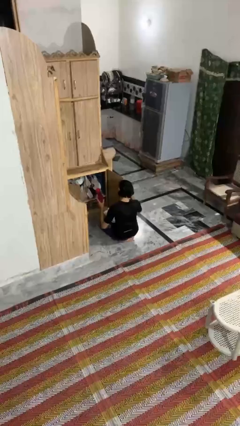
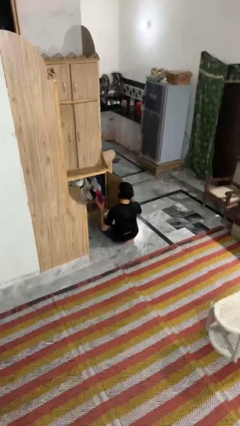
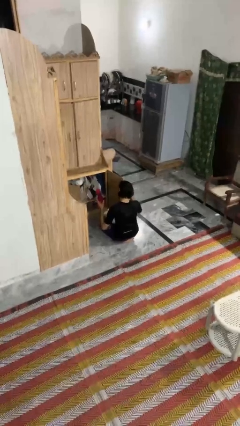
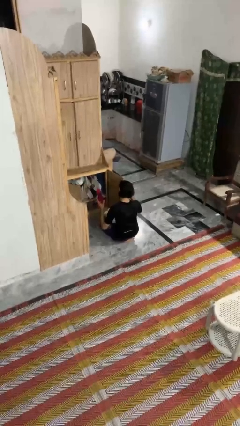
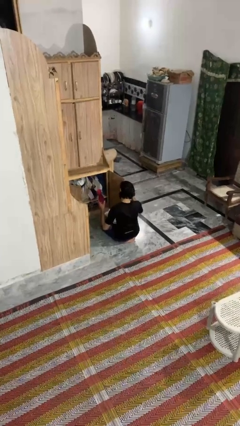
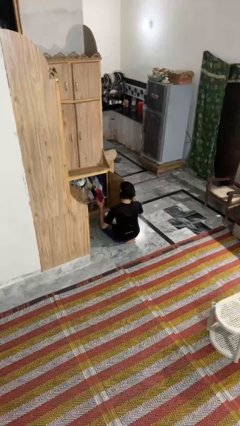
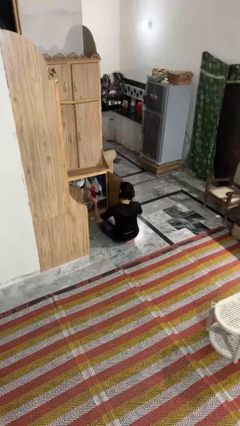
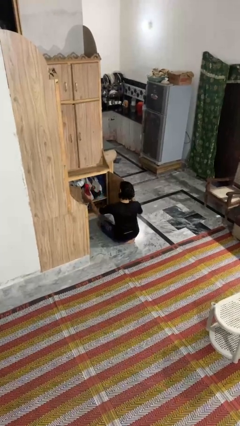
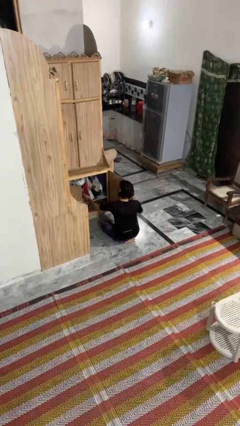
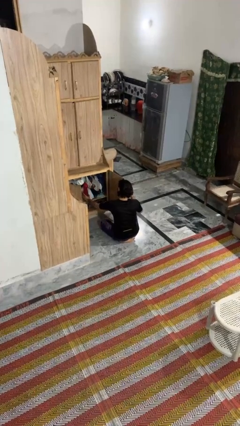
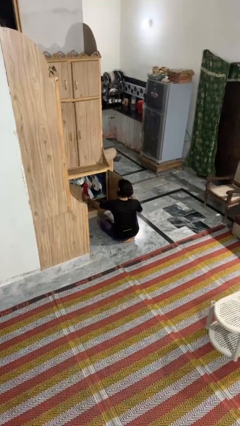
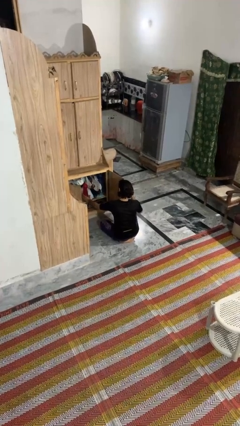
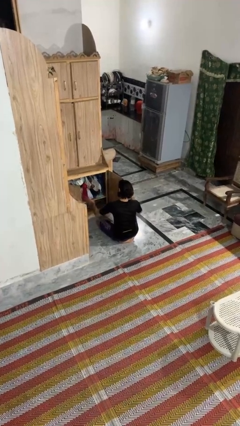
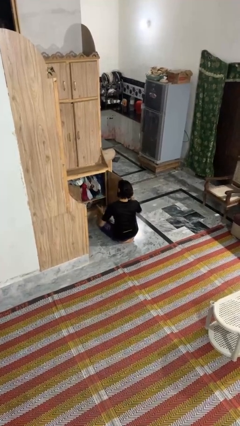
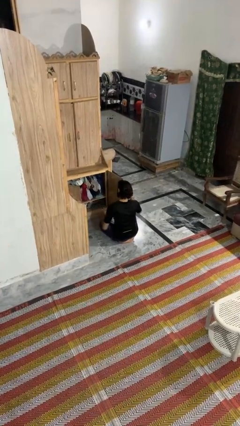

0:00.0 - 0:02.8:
person puts down object into cabinet

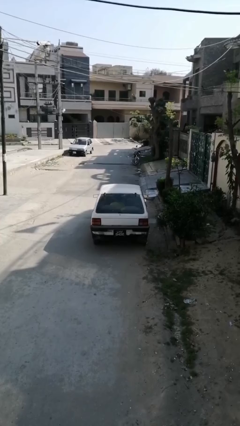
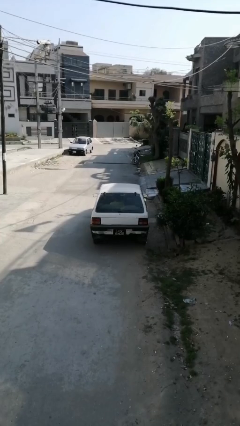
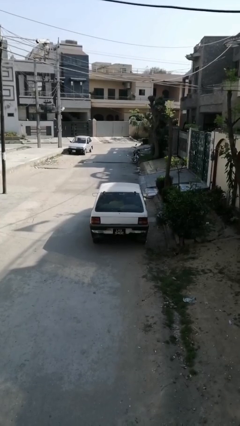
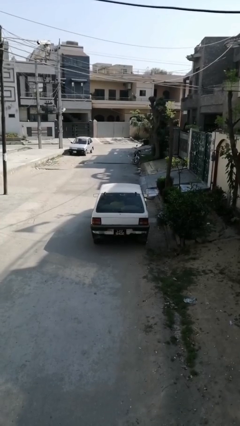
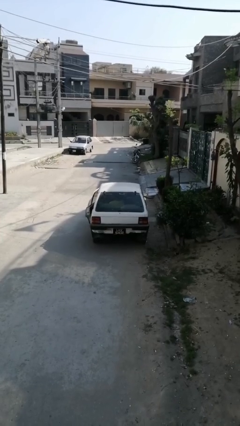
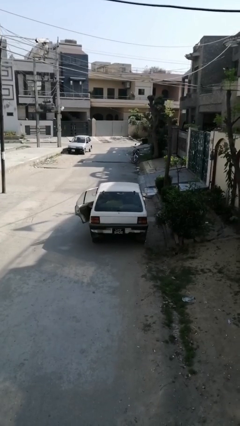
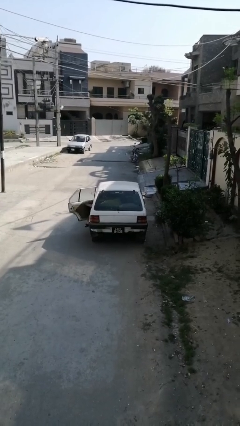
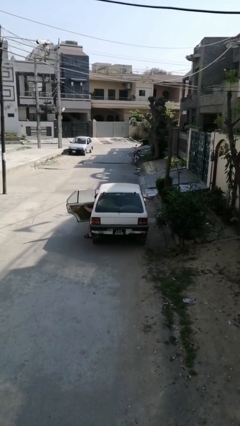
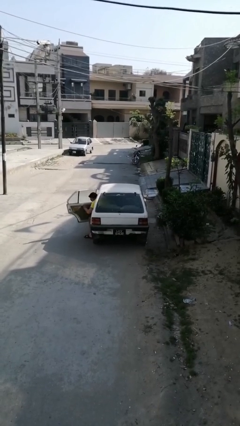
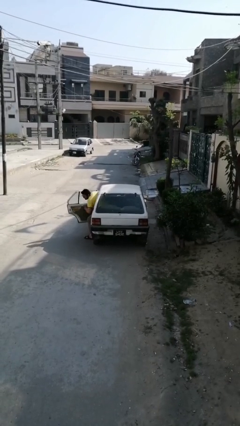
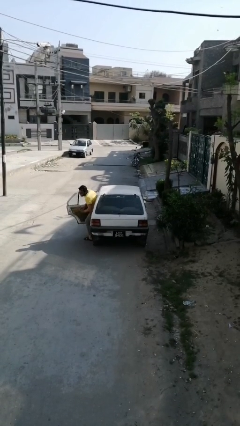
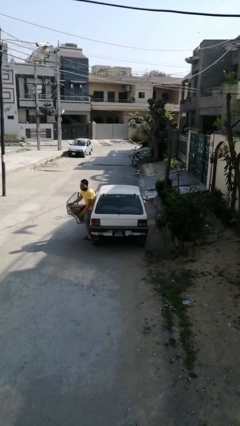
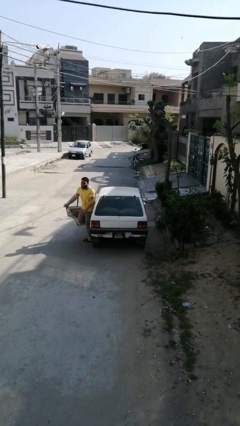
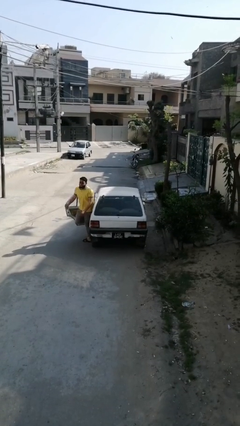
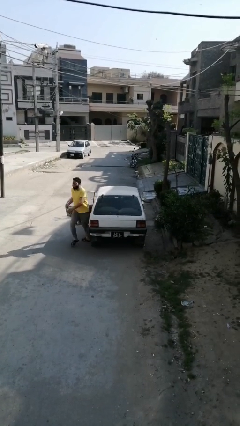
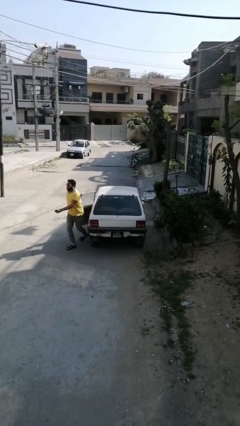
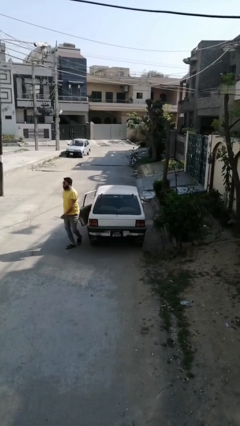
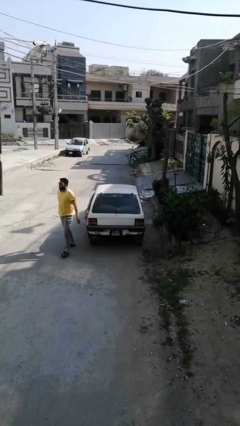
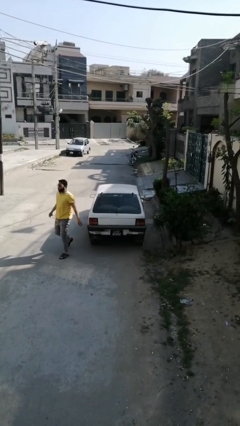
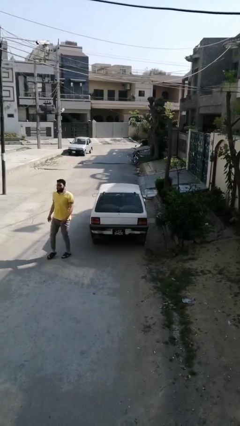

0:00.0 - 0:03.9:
car drops off person

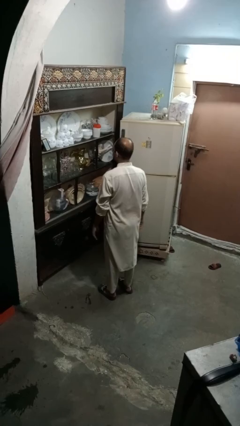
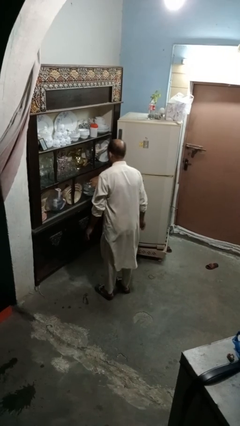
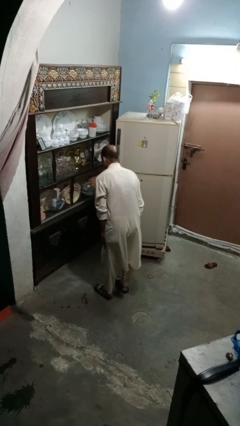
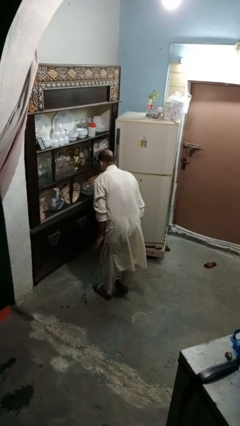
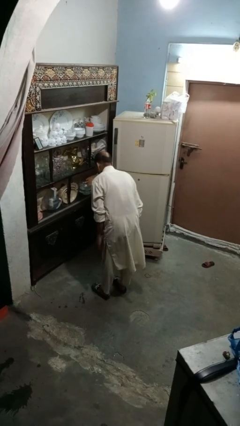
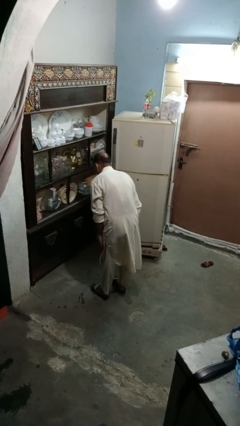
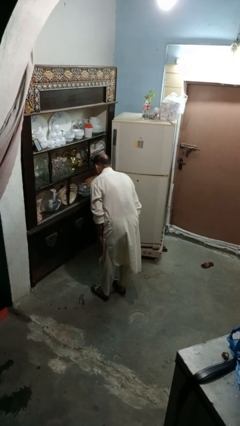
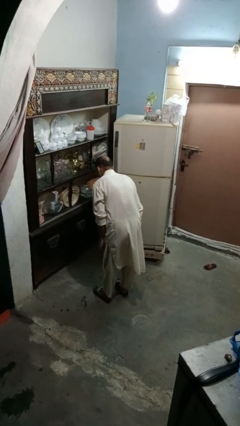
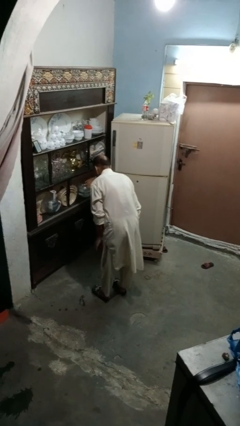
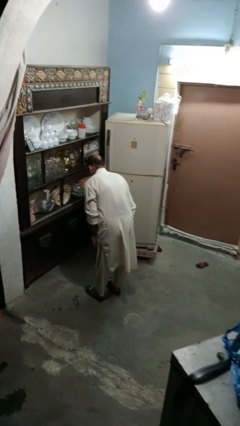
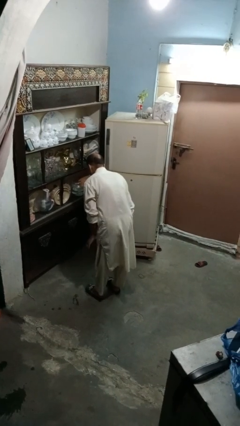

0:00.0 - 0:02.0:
person slaps hands on thighs

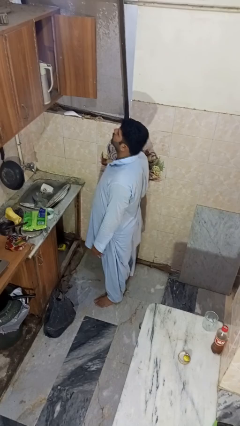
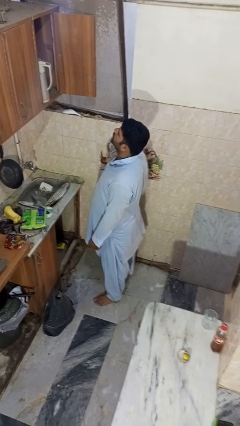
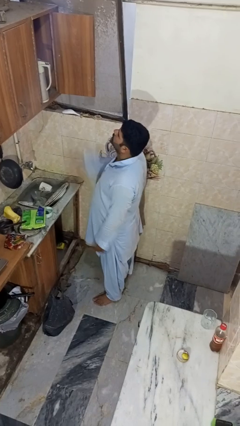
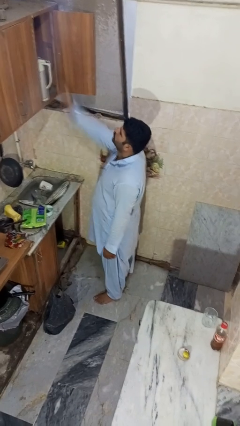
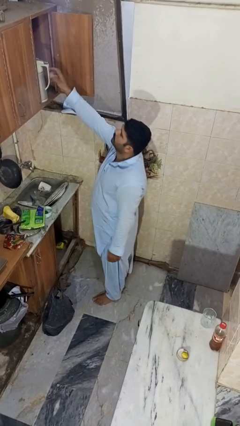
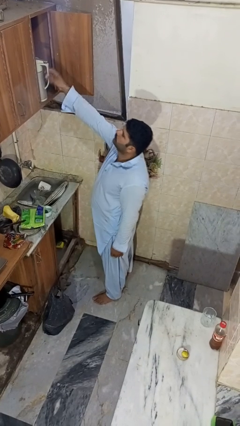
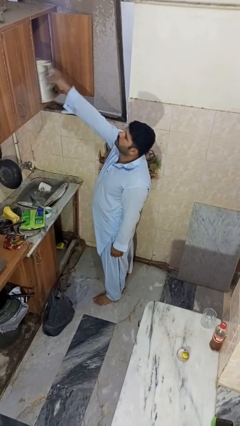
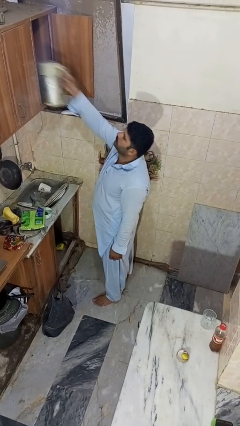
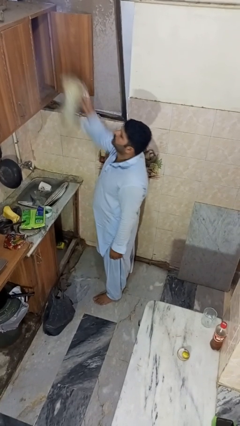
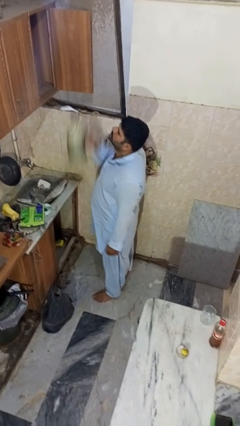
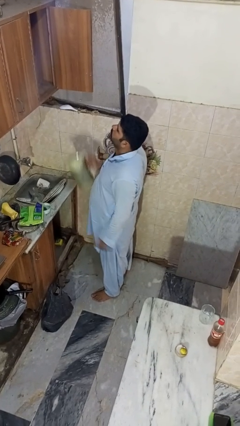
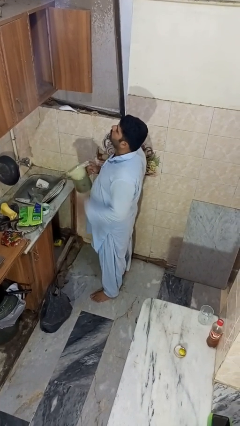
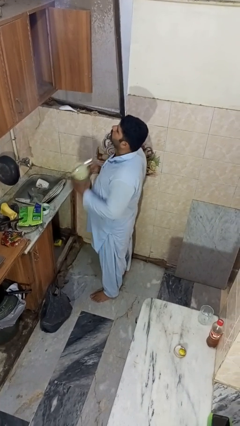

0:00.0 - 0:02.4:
person takes object from cabinet

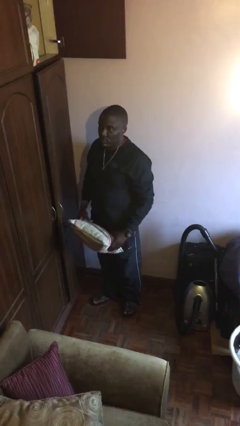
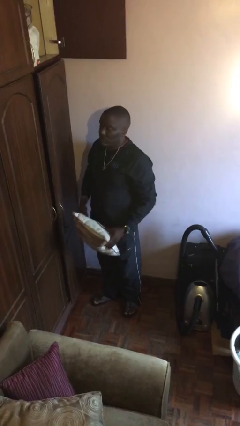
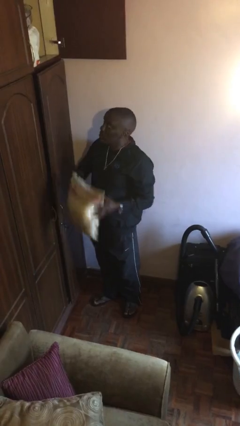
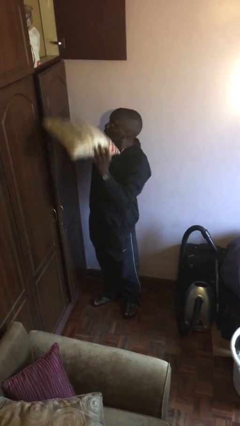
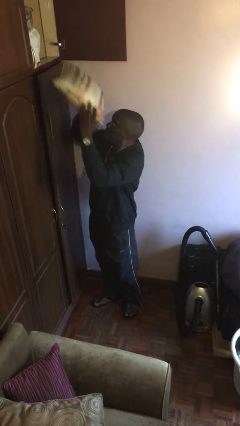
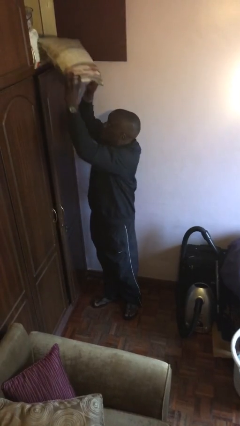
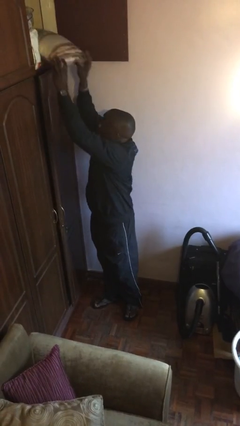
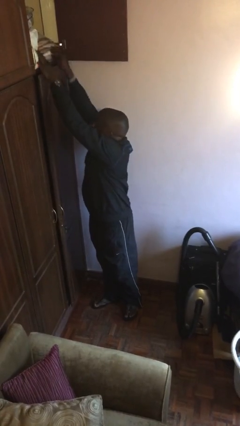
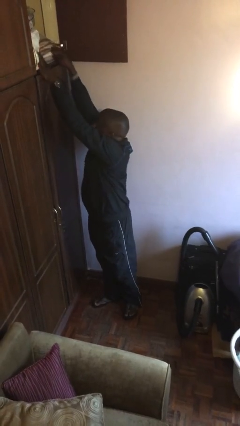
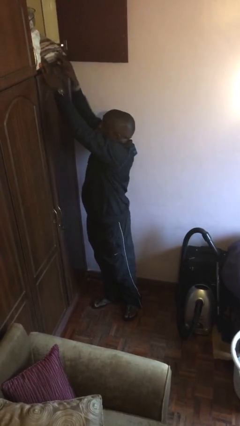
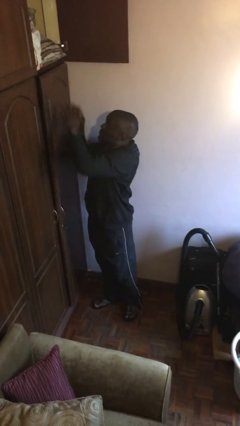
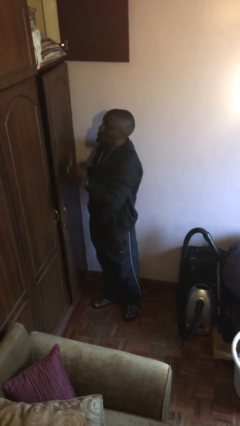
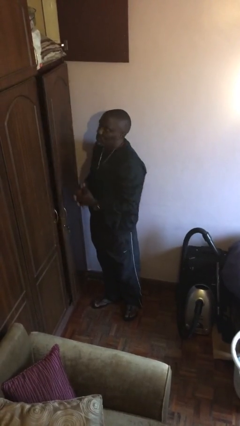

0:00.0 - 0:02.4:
person puts down object on shelf

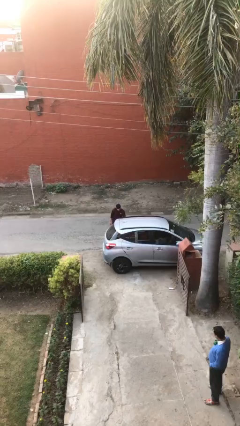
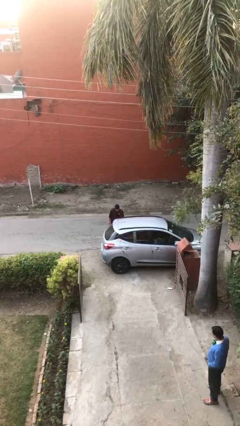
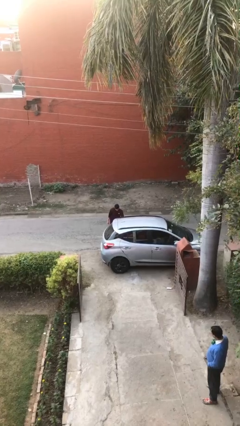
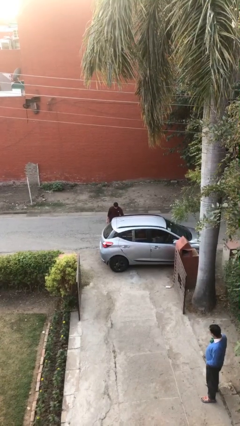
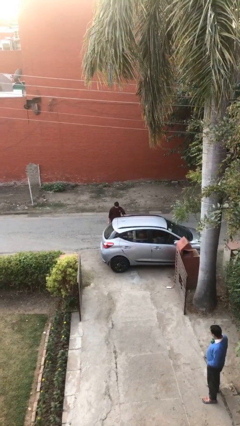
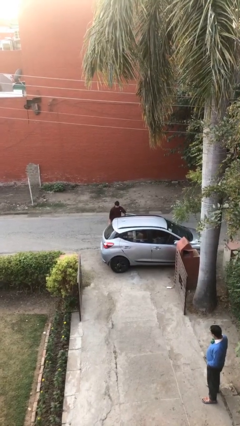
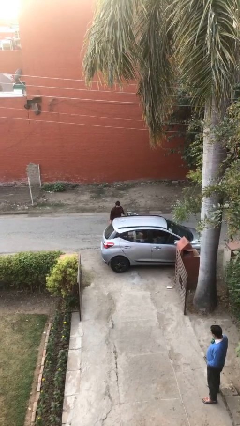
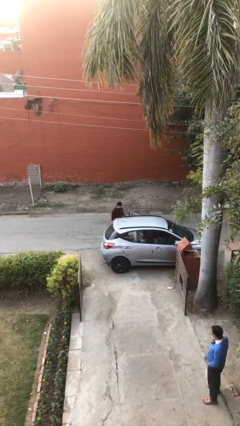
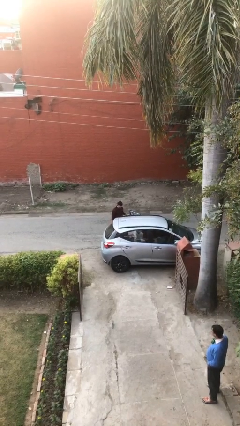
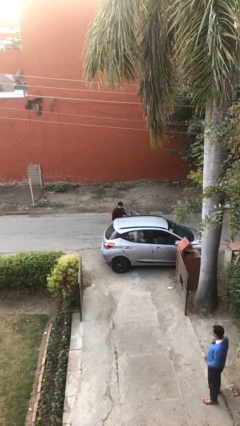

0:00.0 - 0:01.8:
person opens car door

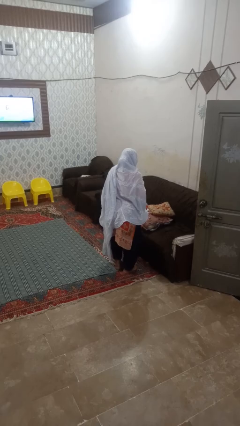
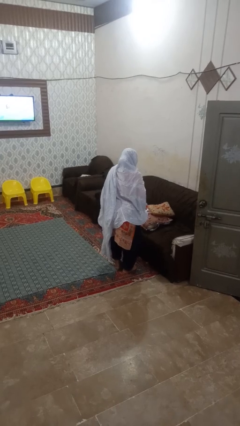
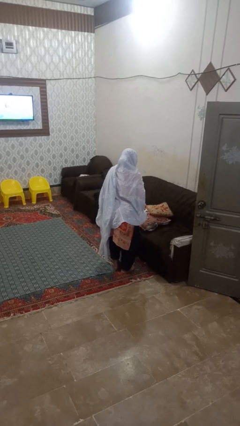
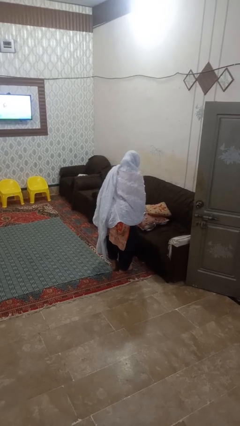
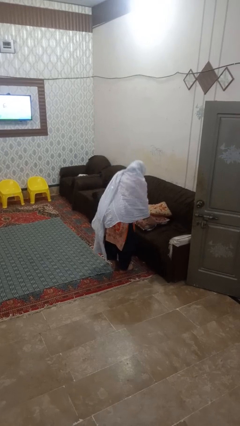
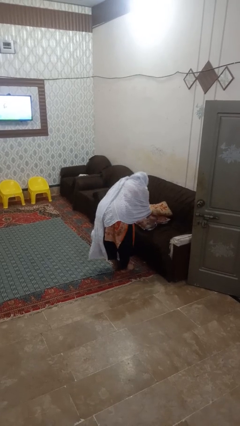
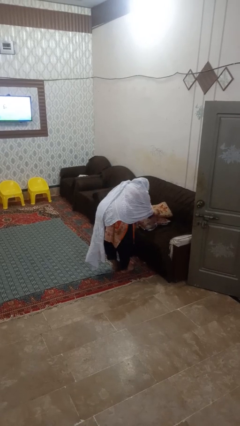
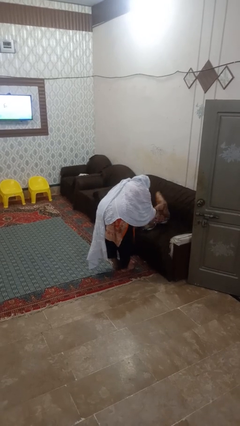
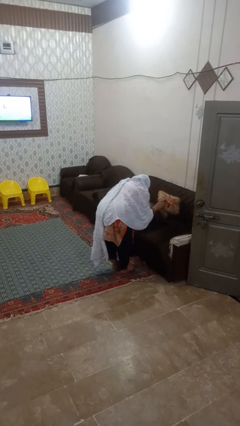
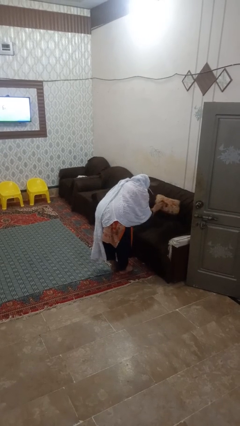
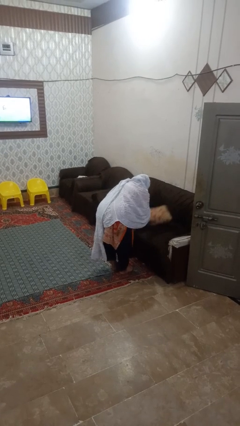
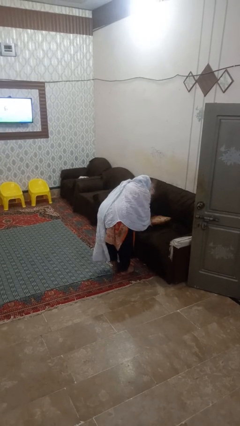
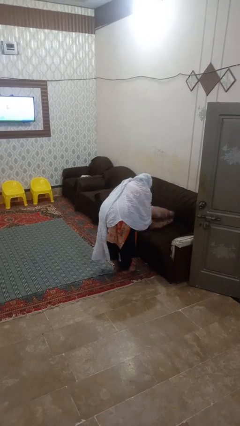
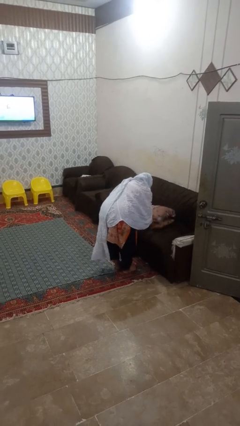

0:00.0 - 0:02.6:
person searches in couch
